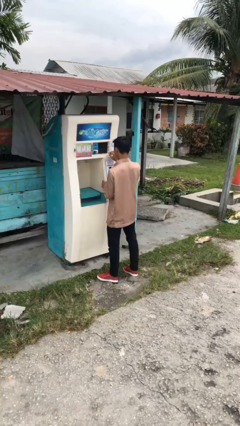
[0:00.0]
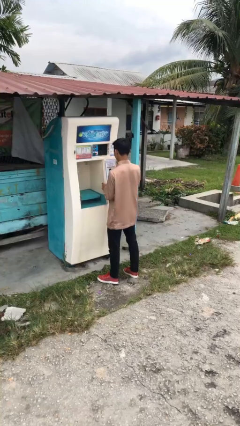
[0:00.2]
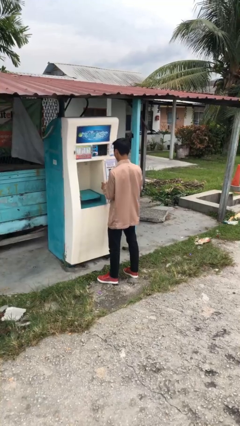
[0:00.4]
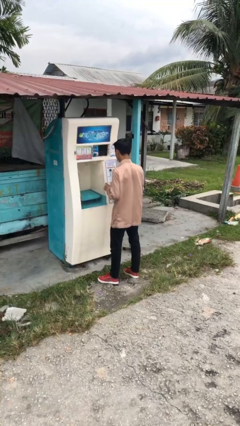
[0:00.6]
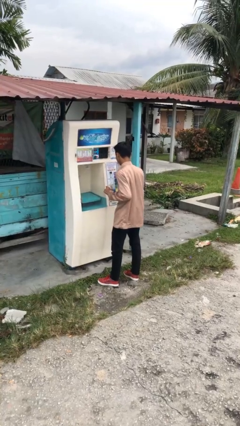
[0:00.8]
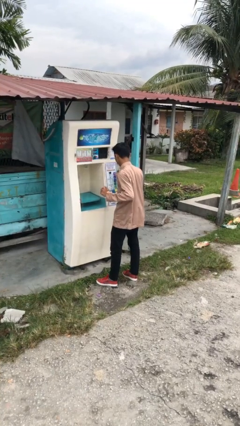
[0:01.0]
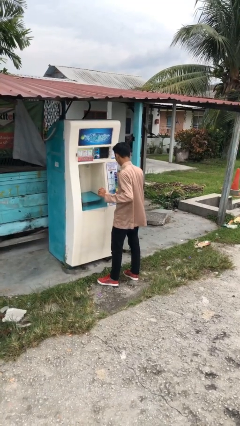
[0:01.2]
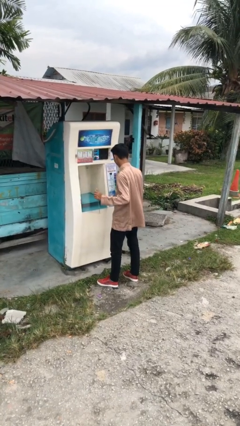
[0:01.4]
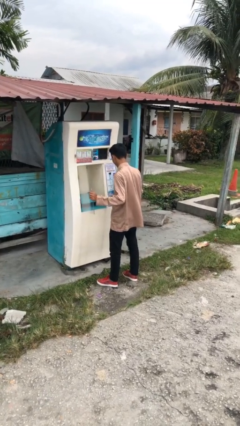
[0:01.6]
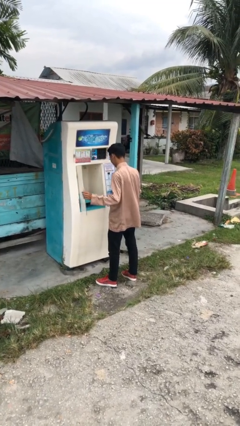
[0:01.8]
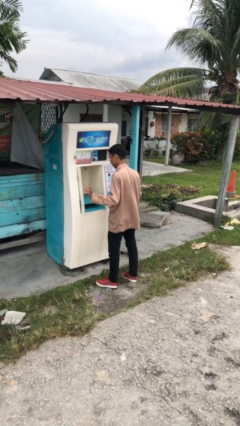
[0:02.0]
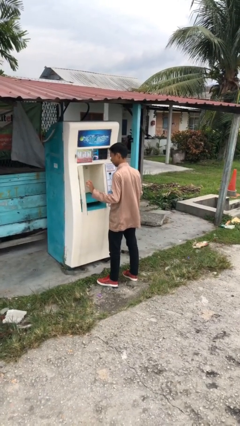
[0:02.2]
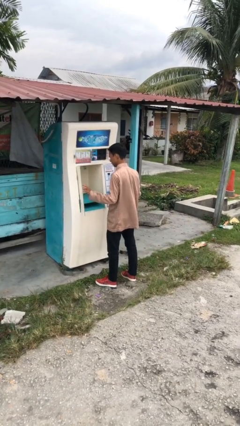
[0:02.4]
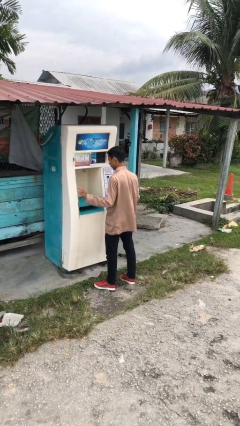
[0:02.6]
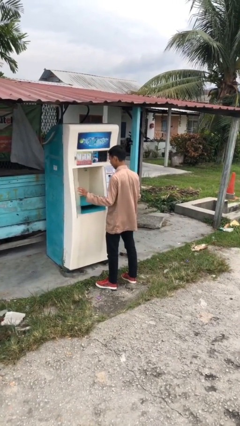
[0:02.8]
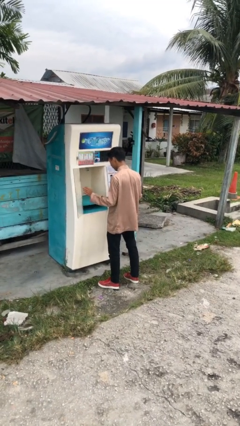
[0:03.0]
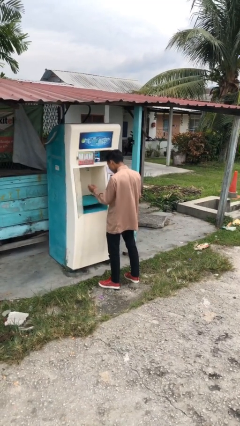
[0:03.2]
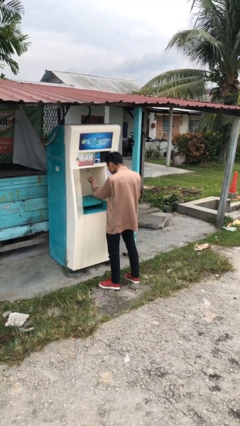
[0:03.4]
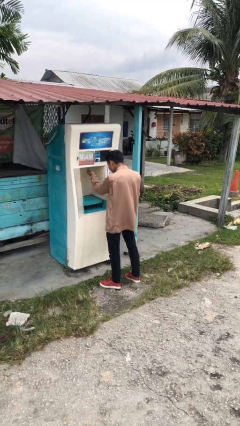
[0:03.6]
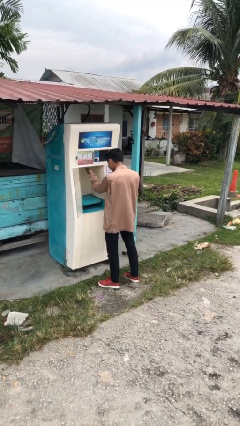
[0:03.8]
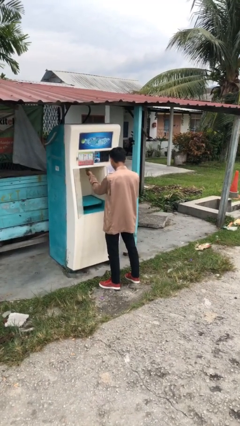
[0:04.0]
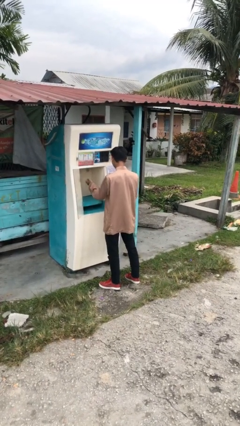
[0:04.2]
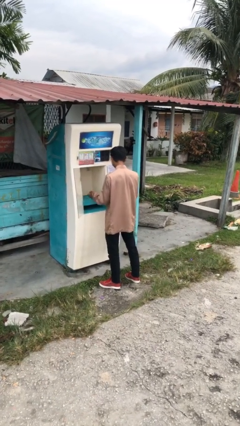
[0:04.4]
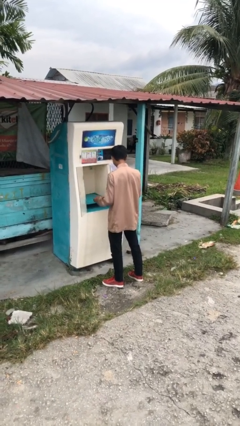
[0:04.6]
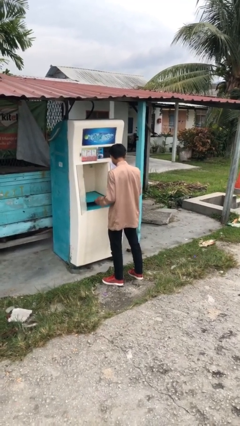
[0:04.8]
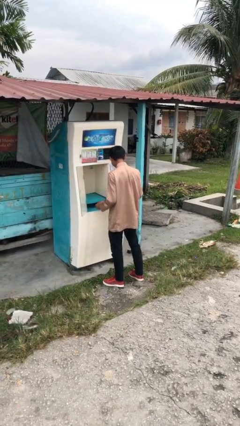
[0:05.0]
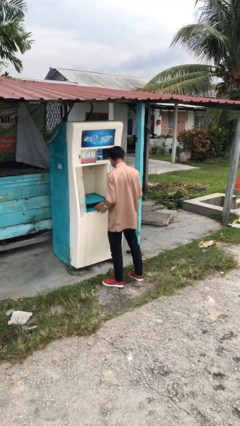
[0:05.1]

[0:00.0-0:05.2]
person purchases from machine

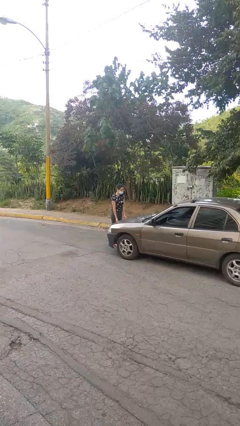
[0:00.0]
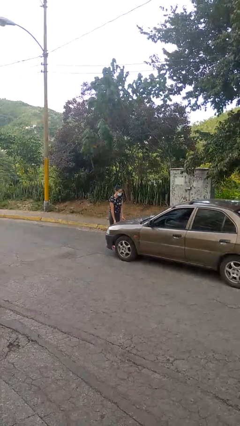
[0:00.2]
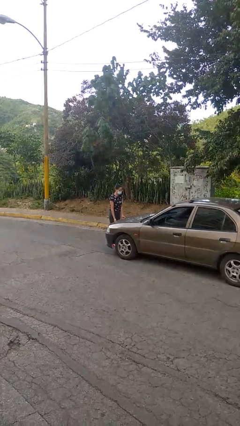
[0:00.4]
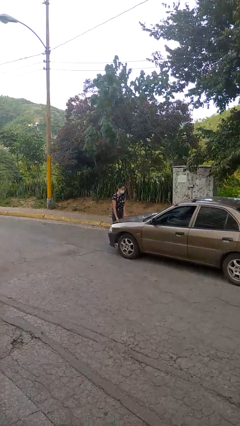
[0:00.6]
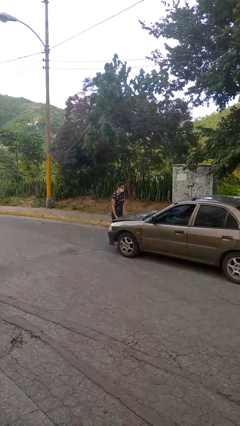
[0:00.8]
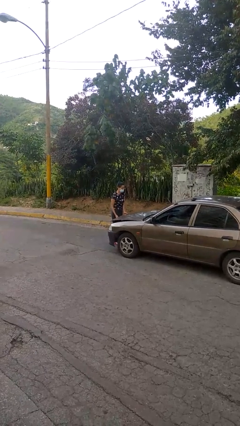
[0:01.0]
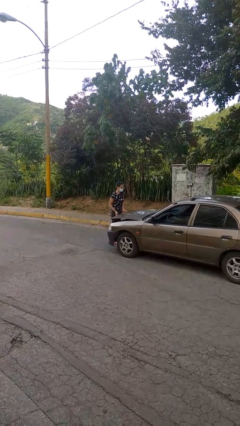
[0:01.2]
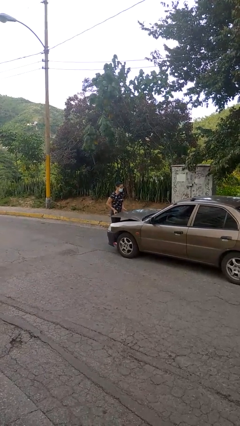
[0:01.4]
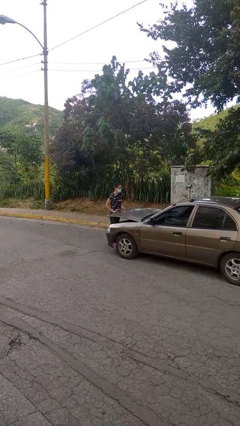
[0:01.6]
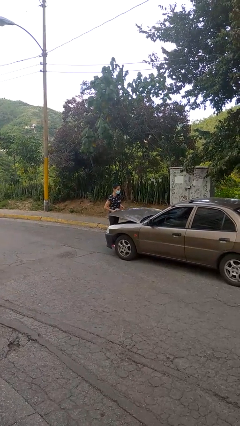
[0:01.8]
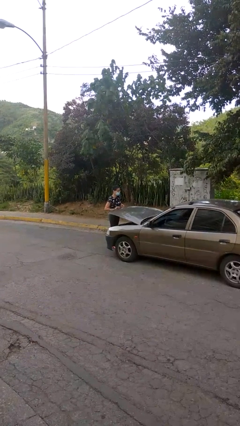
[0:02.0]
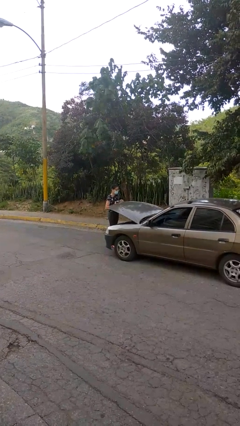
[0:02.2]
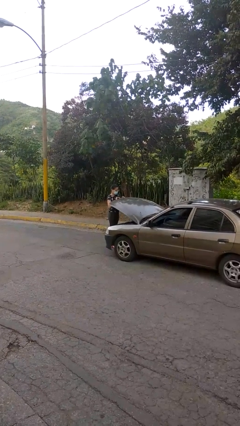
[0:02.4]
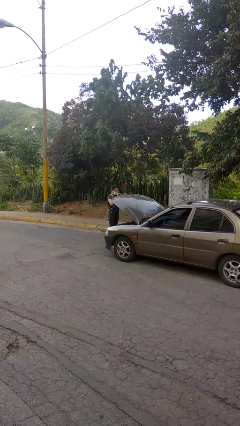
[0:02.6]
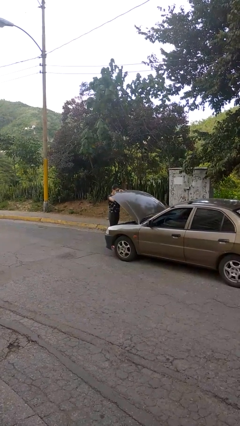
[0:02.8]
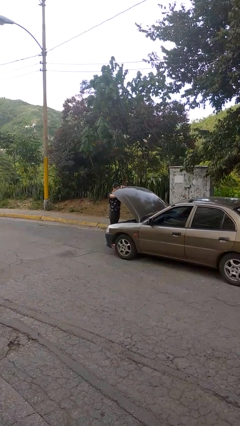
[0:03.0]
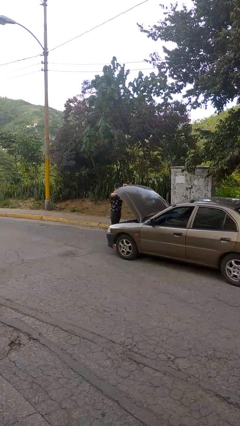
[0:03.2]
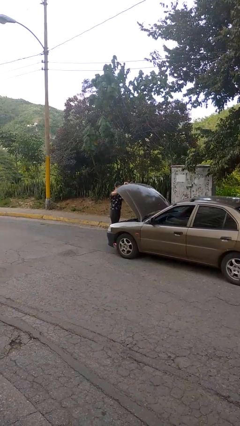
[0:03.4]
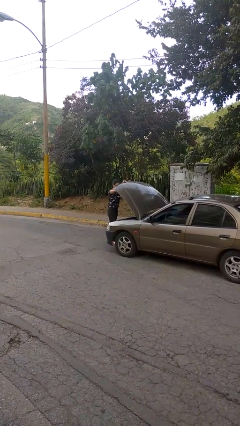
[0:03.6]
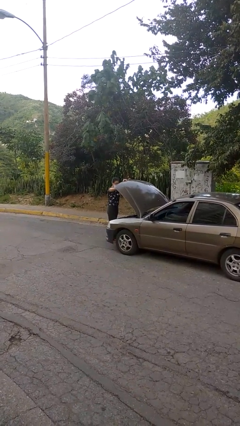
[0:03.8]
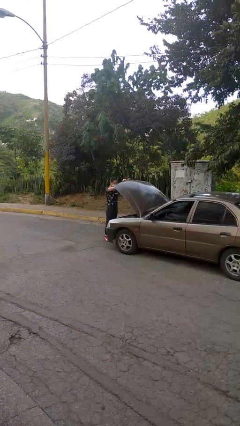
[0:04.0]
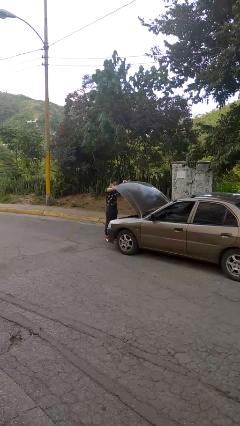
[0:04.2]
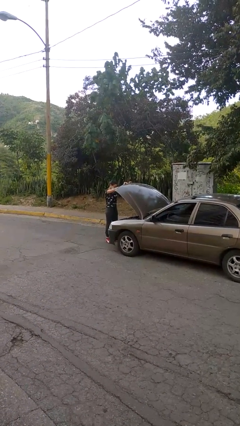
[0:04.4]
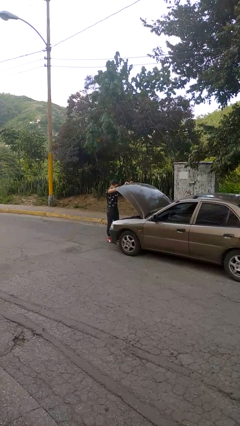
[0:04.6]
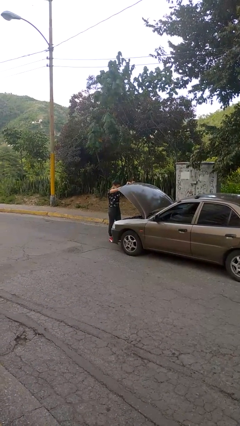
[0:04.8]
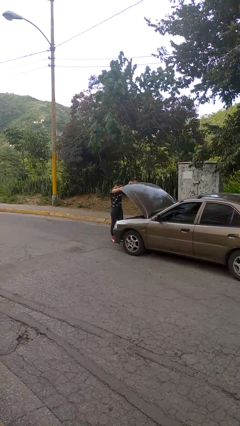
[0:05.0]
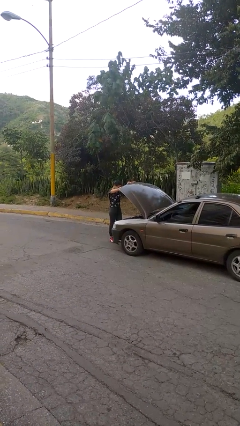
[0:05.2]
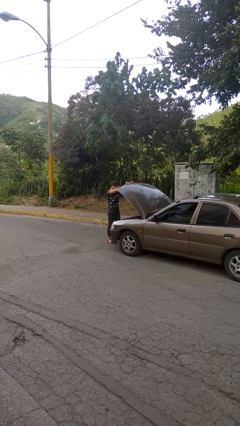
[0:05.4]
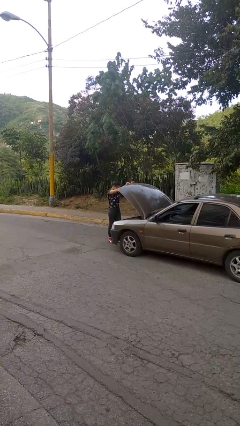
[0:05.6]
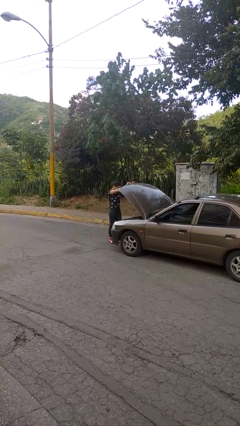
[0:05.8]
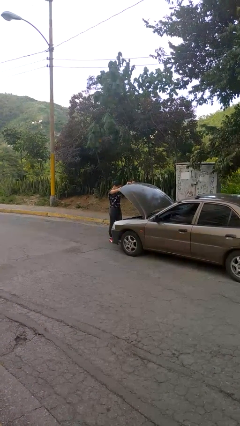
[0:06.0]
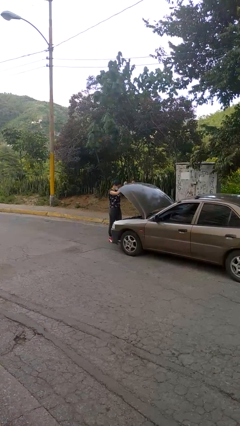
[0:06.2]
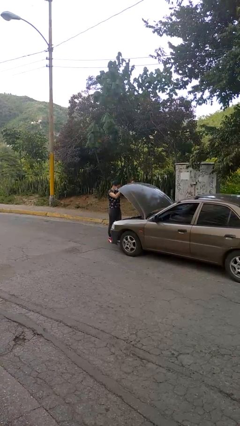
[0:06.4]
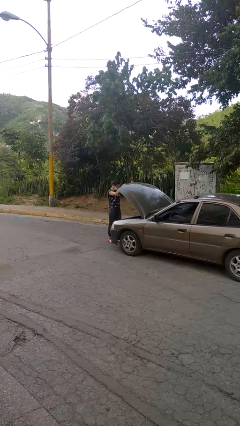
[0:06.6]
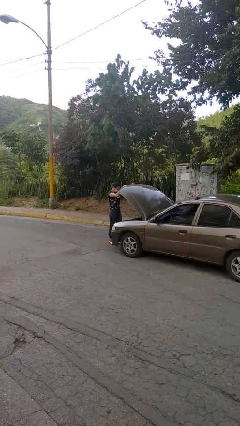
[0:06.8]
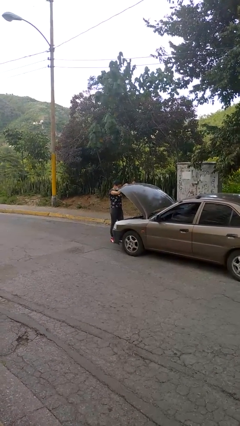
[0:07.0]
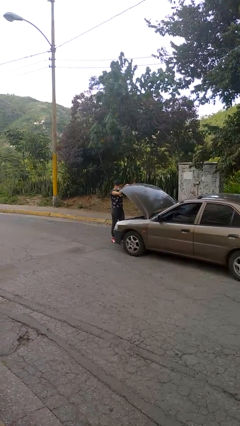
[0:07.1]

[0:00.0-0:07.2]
person opens car hood

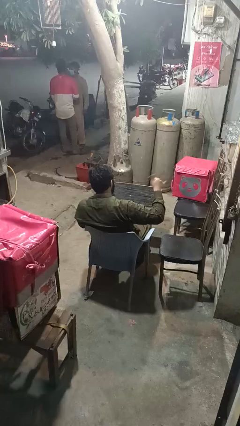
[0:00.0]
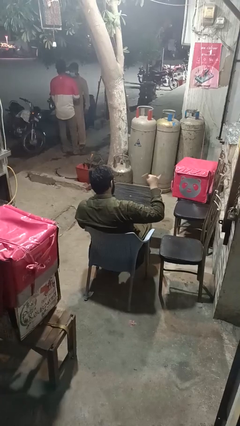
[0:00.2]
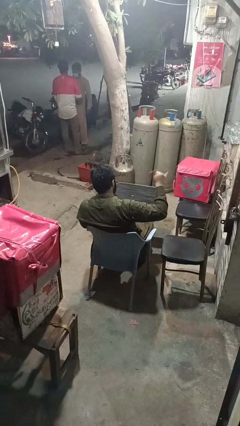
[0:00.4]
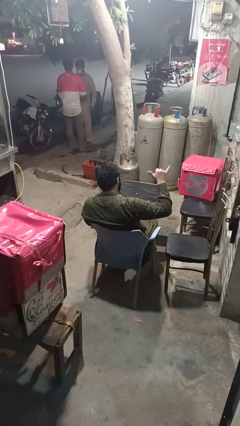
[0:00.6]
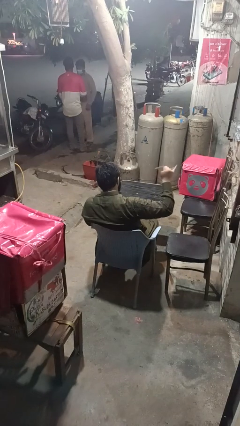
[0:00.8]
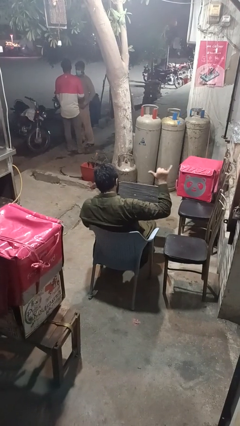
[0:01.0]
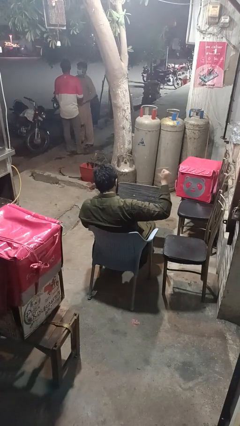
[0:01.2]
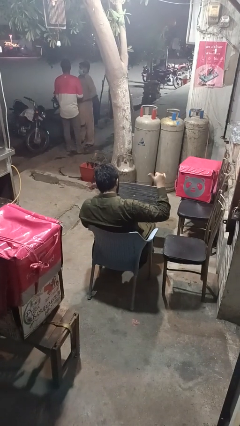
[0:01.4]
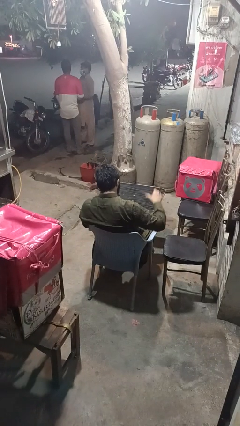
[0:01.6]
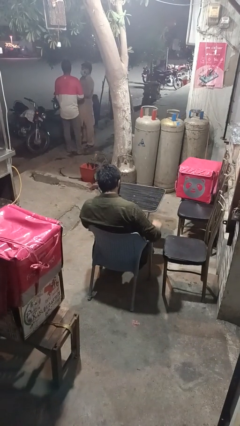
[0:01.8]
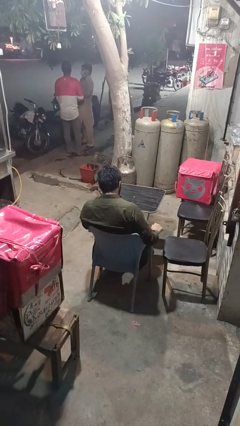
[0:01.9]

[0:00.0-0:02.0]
person gestures hang loose

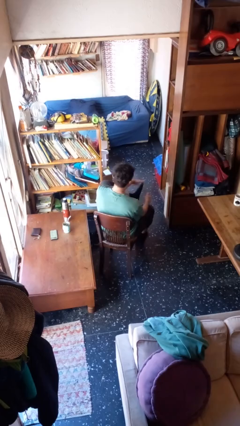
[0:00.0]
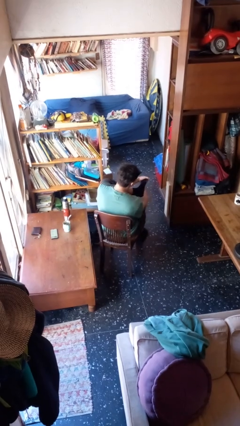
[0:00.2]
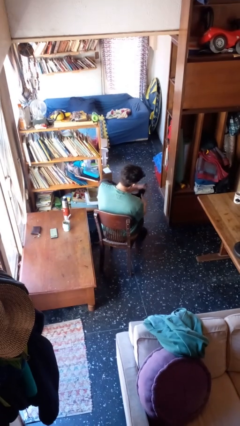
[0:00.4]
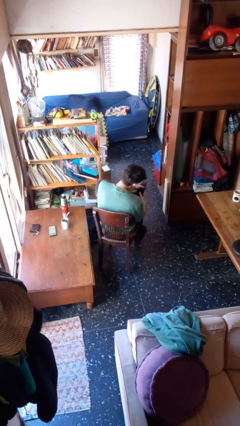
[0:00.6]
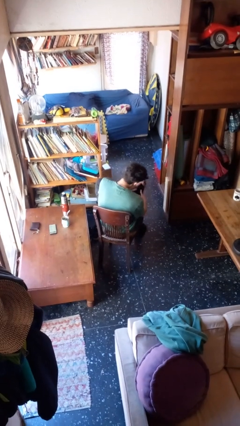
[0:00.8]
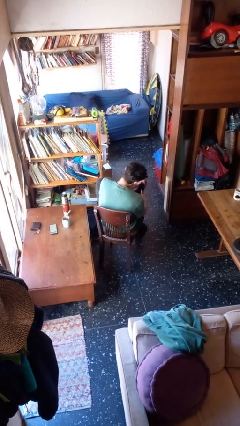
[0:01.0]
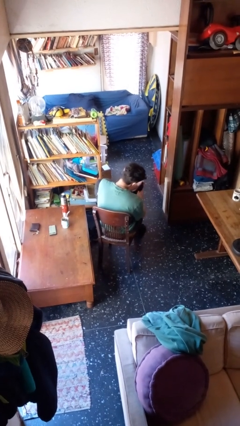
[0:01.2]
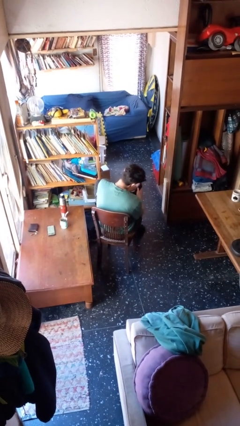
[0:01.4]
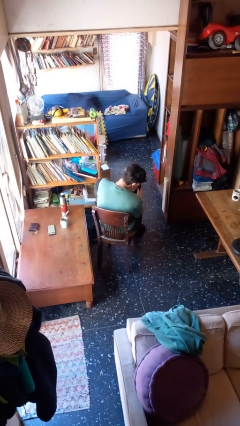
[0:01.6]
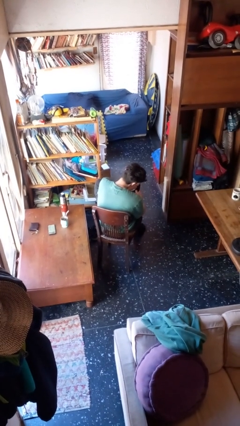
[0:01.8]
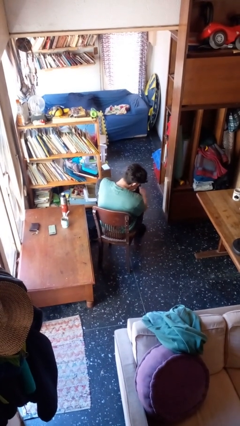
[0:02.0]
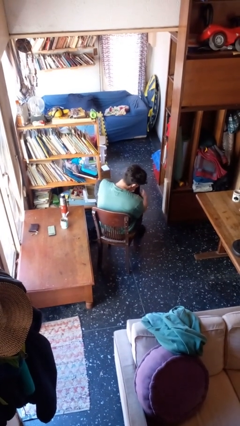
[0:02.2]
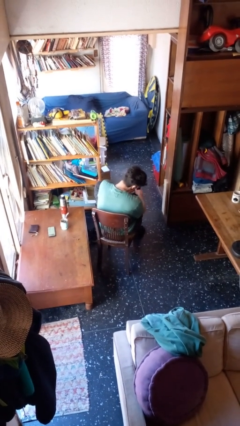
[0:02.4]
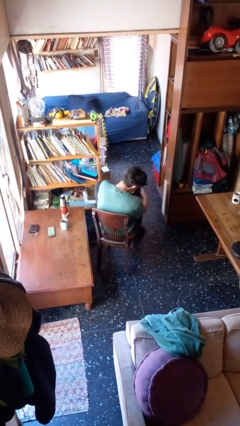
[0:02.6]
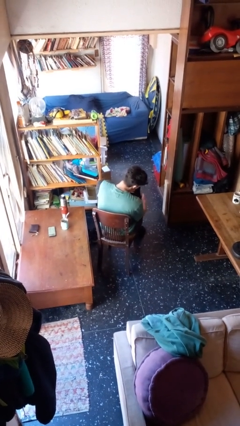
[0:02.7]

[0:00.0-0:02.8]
person rubs foot

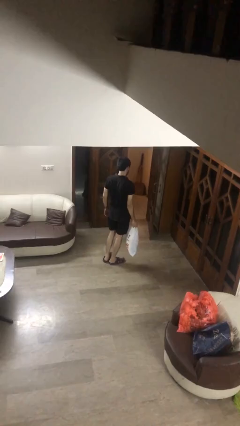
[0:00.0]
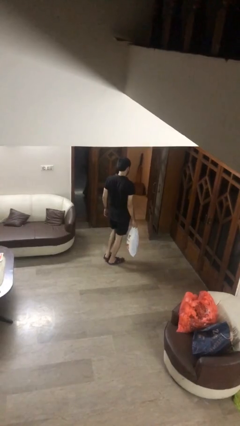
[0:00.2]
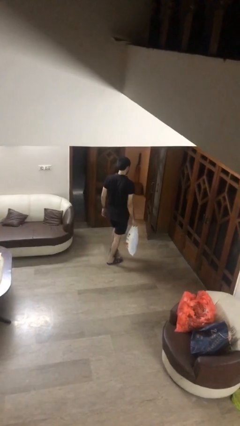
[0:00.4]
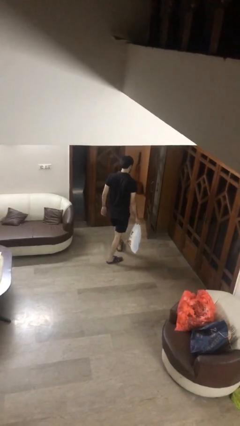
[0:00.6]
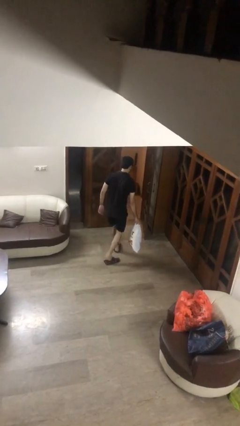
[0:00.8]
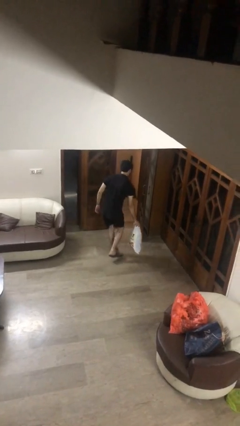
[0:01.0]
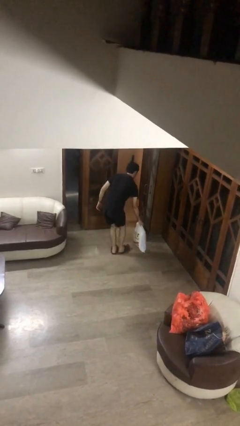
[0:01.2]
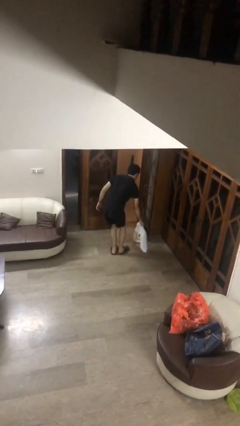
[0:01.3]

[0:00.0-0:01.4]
person puts down object on floor
